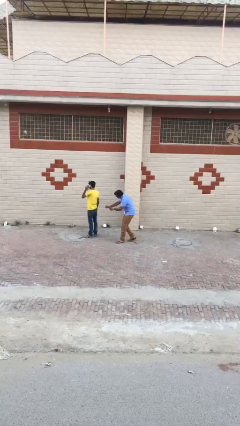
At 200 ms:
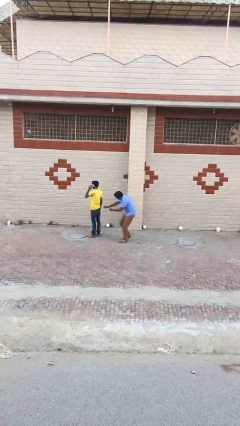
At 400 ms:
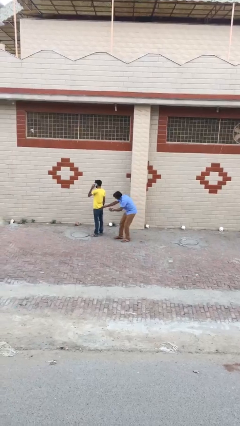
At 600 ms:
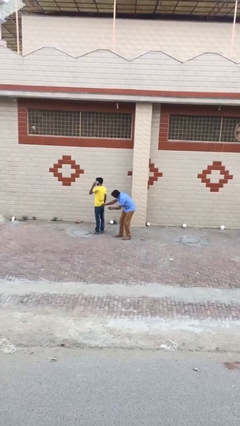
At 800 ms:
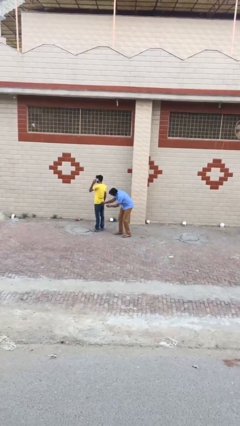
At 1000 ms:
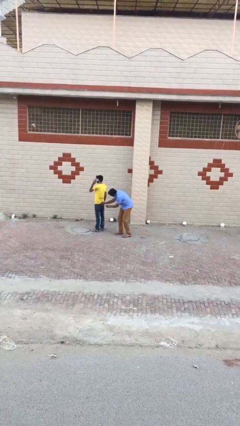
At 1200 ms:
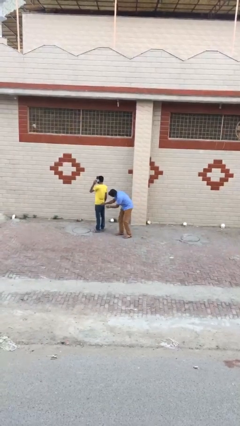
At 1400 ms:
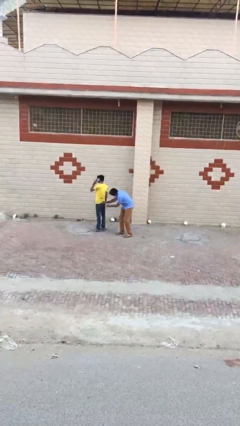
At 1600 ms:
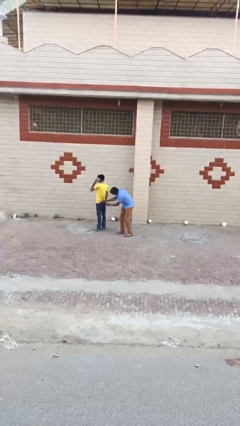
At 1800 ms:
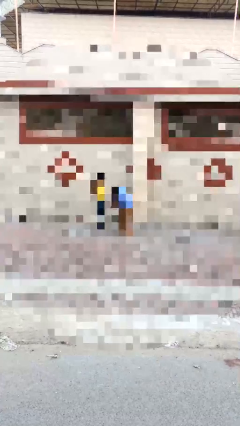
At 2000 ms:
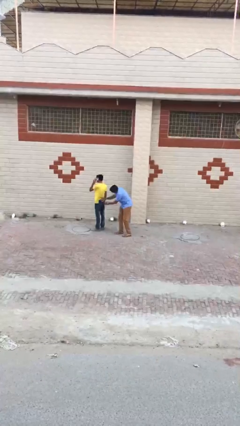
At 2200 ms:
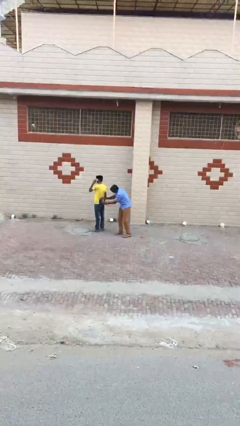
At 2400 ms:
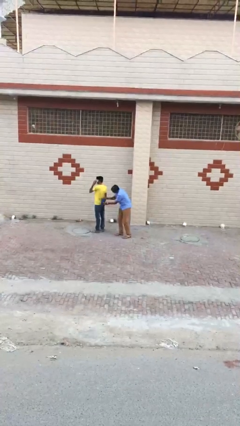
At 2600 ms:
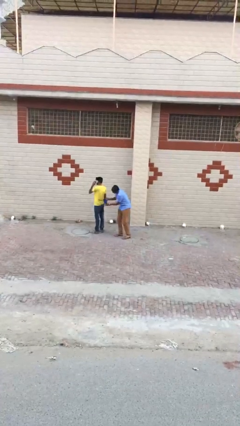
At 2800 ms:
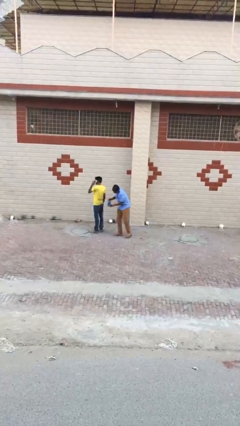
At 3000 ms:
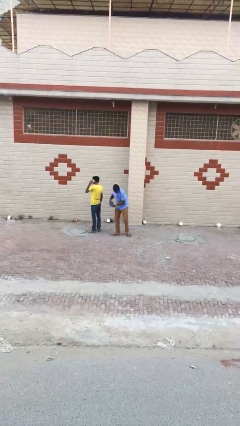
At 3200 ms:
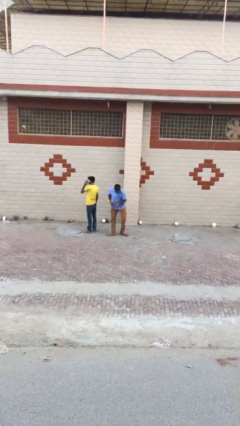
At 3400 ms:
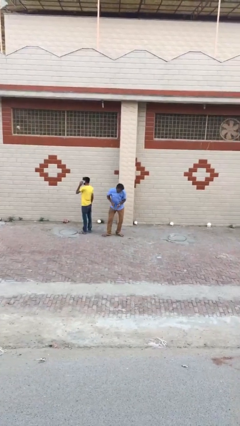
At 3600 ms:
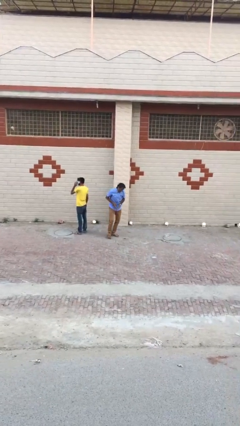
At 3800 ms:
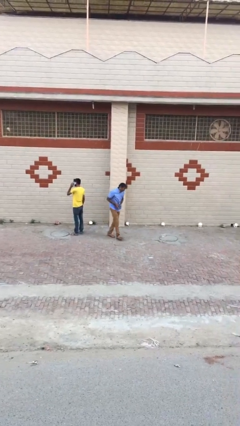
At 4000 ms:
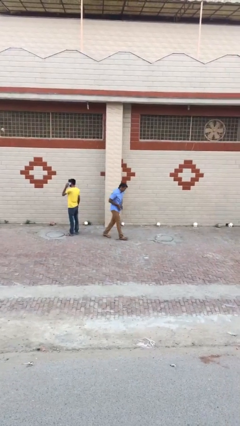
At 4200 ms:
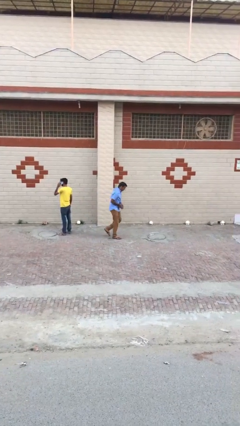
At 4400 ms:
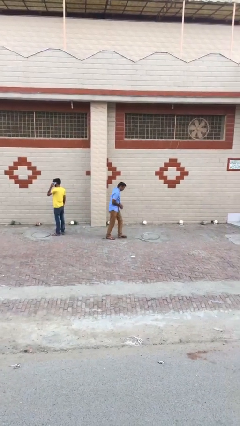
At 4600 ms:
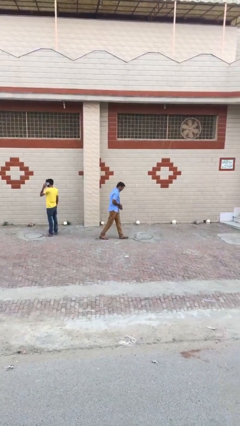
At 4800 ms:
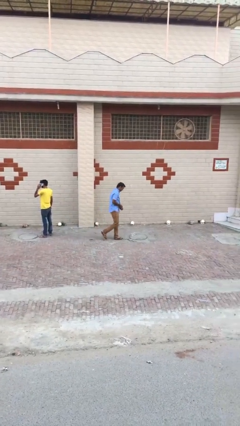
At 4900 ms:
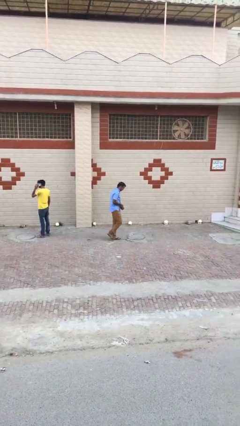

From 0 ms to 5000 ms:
person steals object from person

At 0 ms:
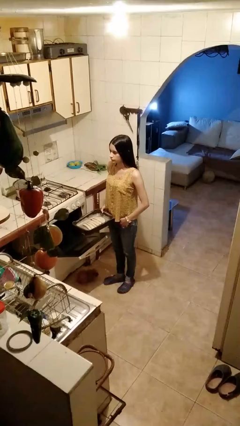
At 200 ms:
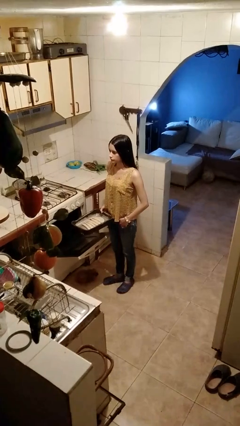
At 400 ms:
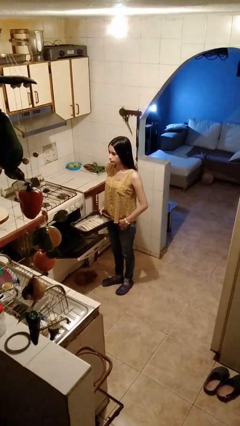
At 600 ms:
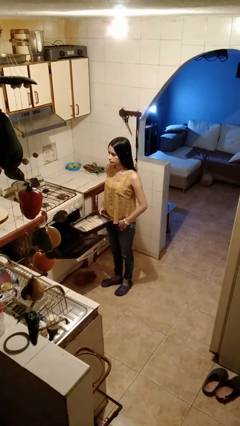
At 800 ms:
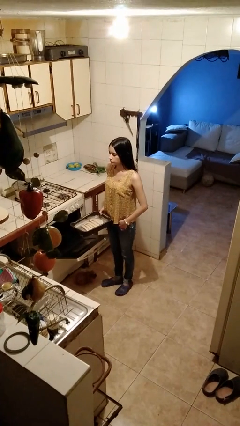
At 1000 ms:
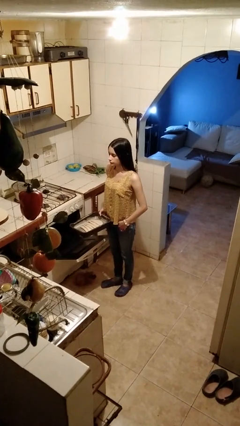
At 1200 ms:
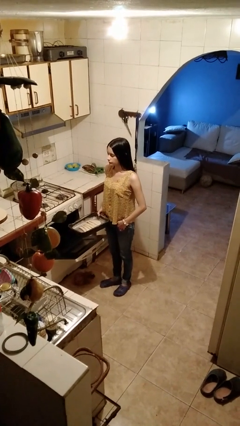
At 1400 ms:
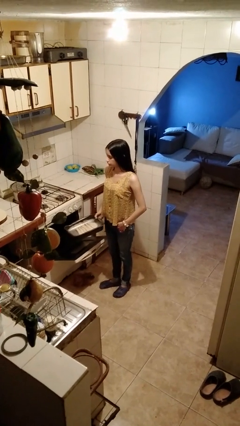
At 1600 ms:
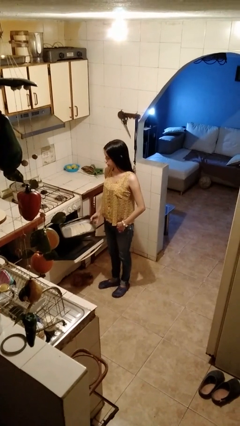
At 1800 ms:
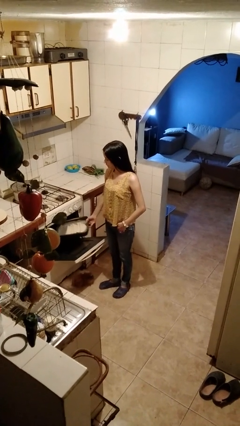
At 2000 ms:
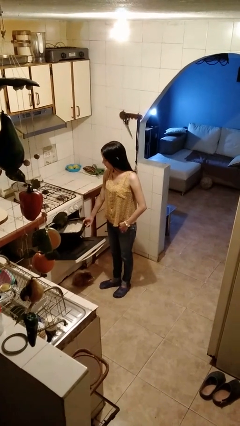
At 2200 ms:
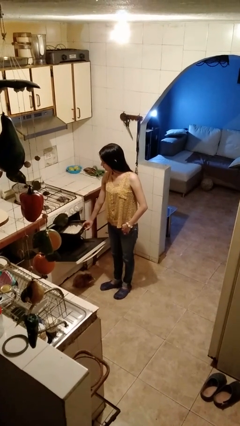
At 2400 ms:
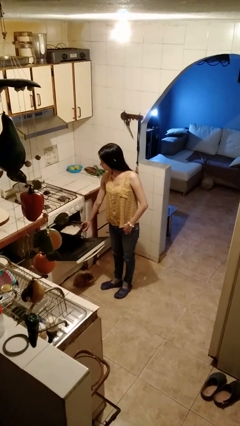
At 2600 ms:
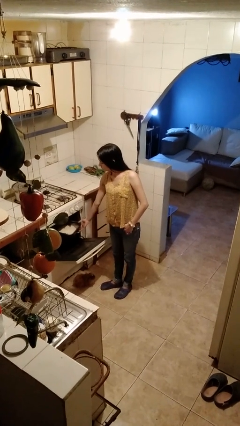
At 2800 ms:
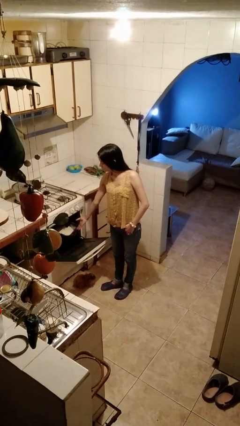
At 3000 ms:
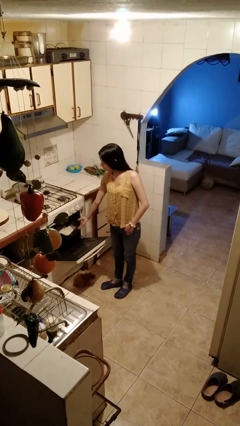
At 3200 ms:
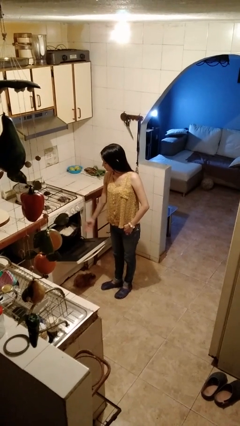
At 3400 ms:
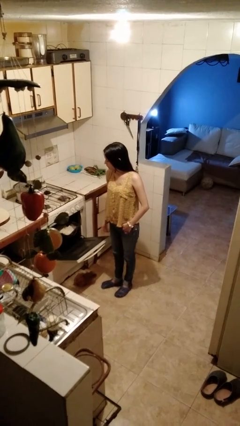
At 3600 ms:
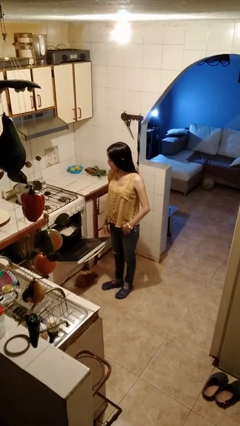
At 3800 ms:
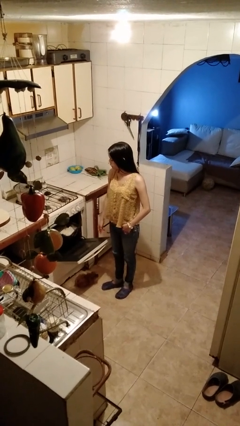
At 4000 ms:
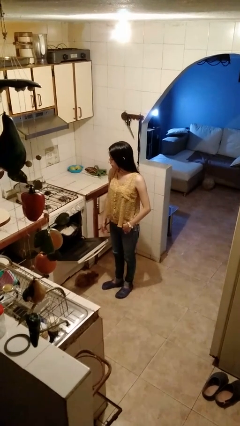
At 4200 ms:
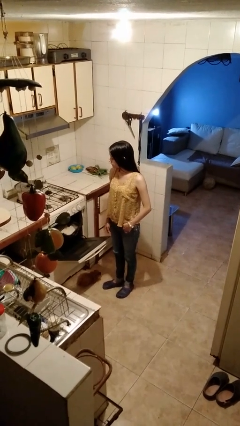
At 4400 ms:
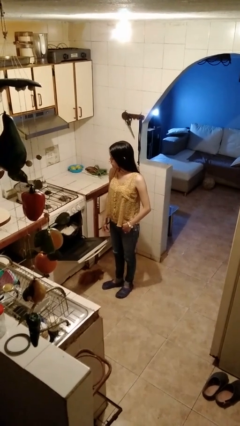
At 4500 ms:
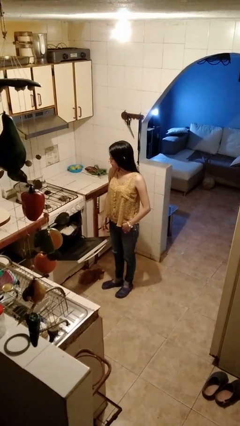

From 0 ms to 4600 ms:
person puts object into oven

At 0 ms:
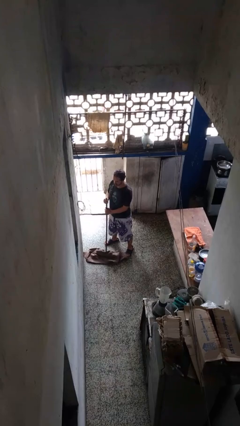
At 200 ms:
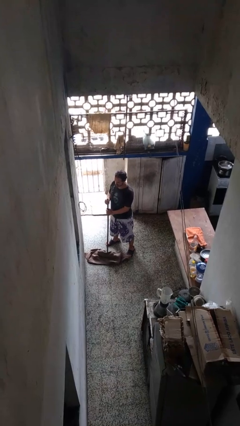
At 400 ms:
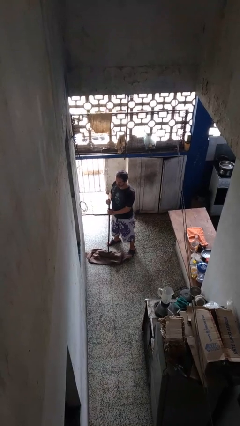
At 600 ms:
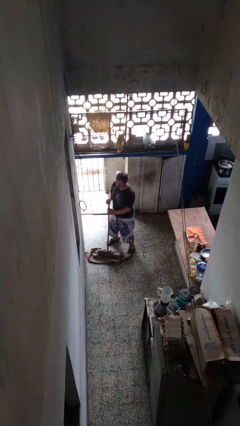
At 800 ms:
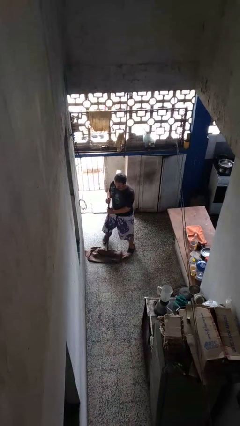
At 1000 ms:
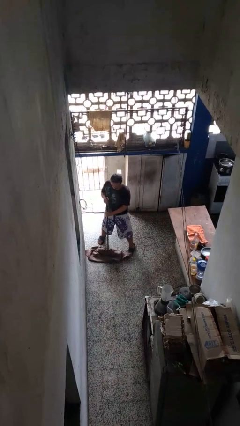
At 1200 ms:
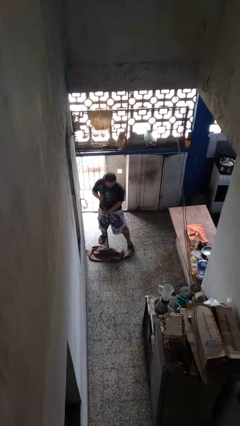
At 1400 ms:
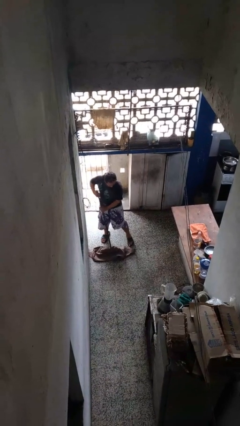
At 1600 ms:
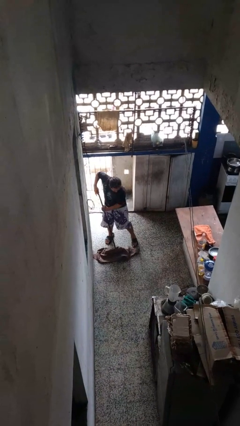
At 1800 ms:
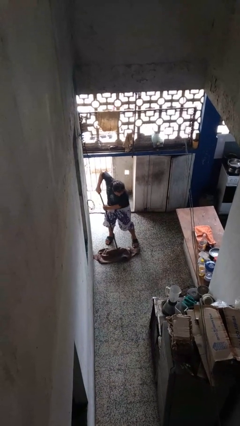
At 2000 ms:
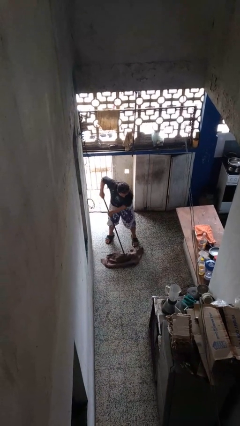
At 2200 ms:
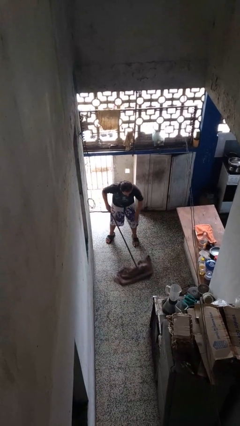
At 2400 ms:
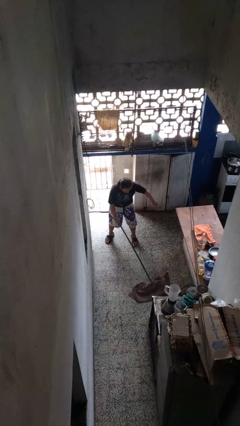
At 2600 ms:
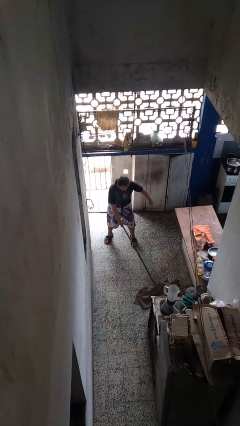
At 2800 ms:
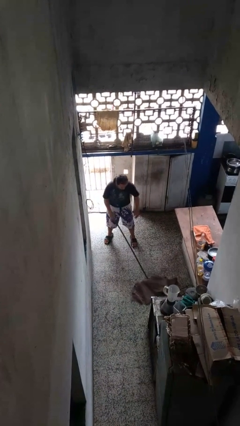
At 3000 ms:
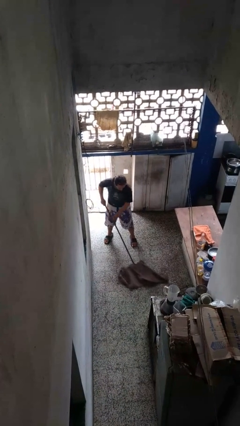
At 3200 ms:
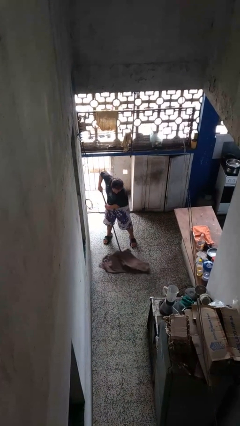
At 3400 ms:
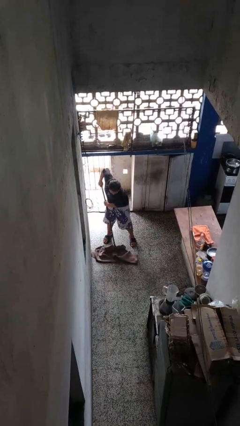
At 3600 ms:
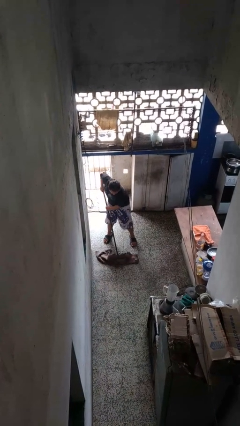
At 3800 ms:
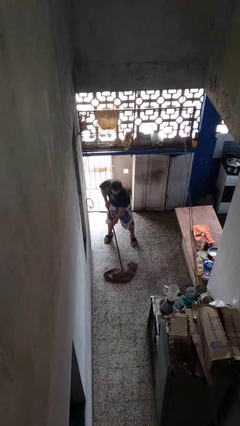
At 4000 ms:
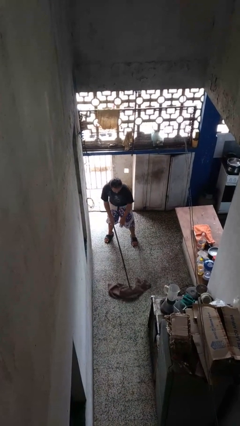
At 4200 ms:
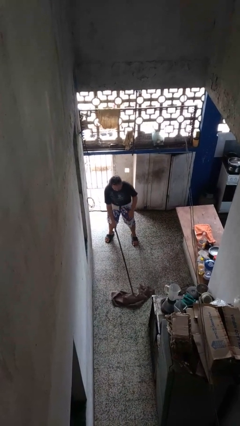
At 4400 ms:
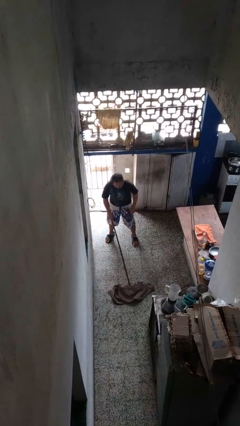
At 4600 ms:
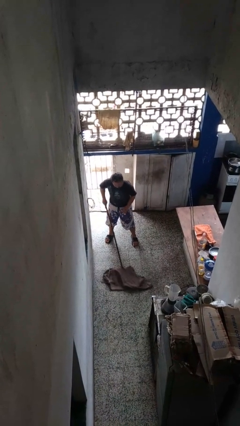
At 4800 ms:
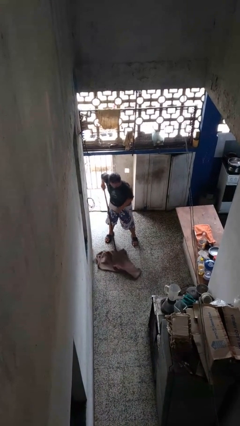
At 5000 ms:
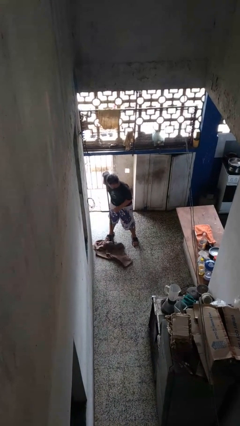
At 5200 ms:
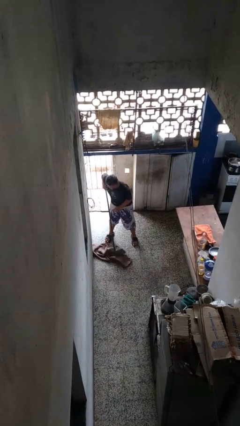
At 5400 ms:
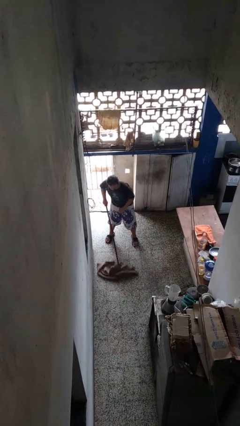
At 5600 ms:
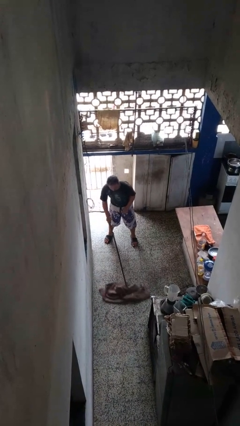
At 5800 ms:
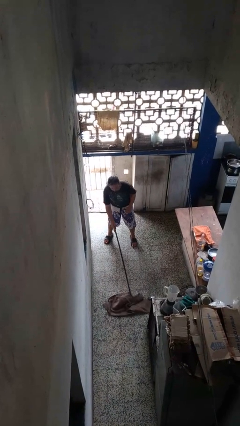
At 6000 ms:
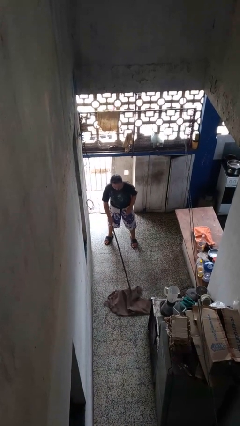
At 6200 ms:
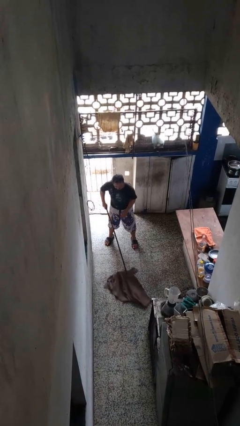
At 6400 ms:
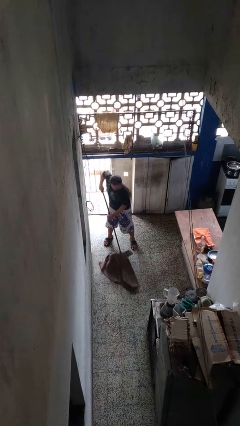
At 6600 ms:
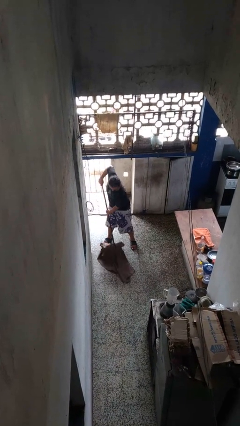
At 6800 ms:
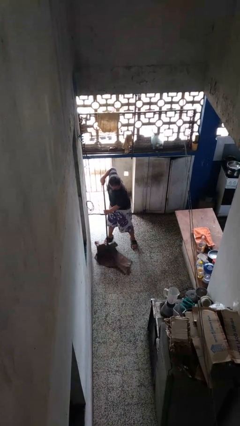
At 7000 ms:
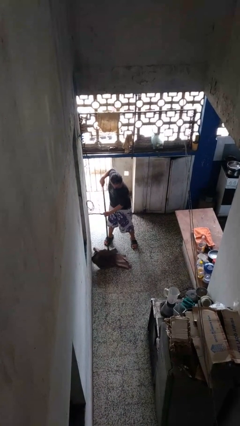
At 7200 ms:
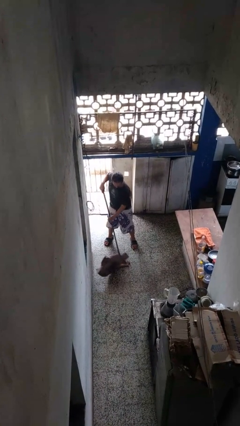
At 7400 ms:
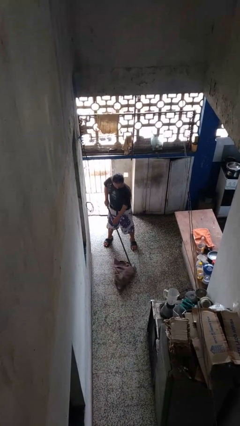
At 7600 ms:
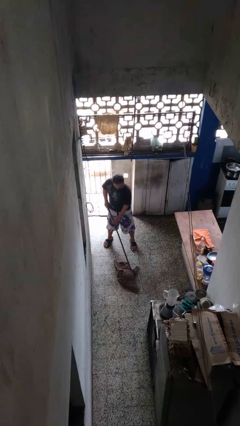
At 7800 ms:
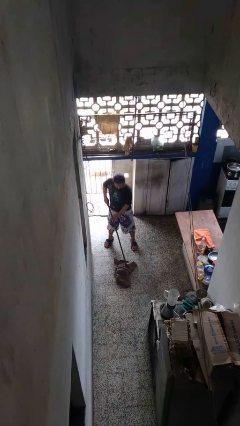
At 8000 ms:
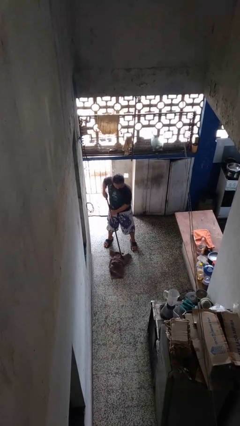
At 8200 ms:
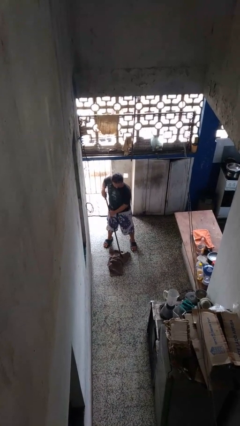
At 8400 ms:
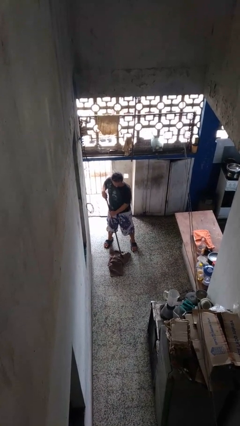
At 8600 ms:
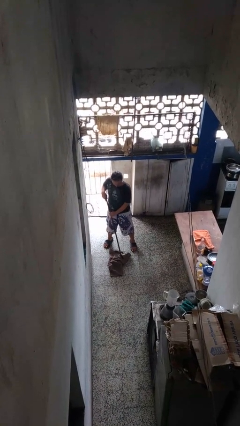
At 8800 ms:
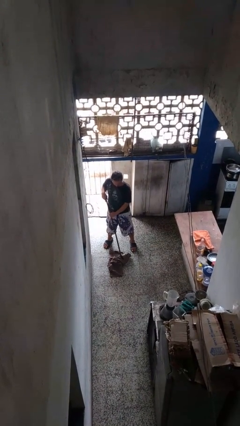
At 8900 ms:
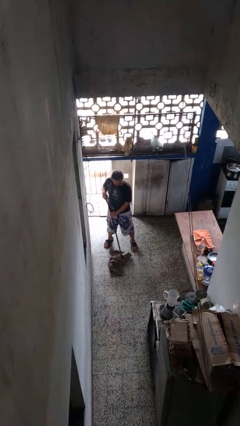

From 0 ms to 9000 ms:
person mops
